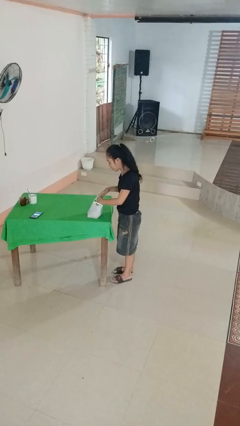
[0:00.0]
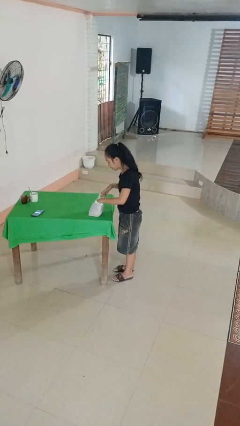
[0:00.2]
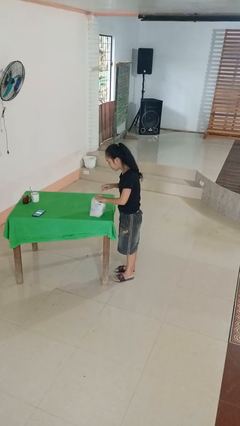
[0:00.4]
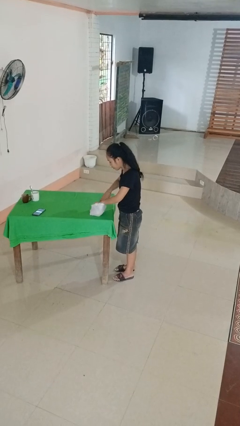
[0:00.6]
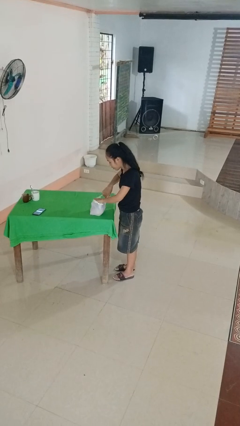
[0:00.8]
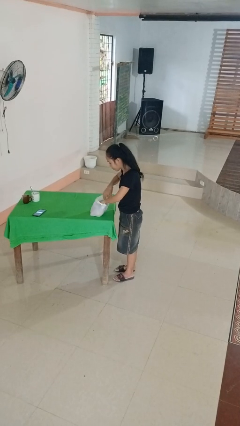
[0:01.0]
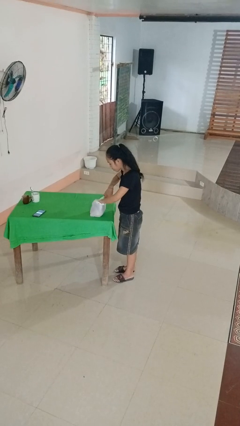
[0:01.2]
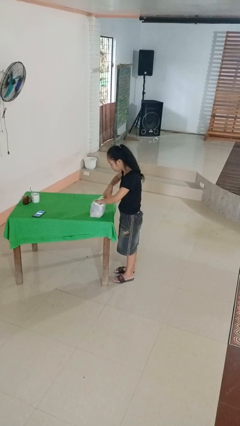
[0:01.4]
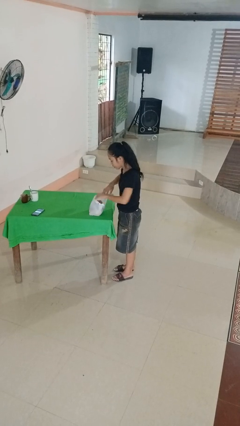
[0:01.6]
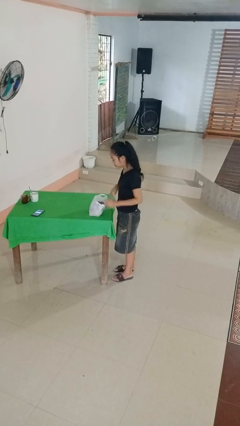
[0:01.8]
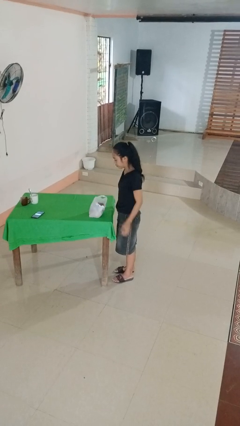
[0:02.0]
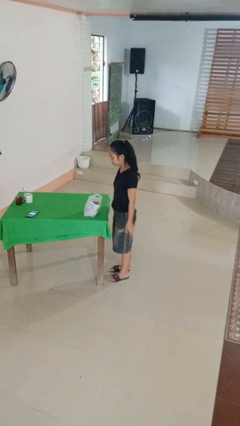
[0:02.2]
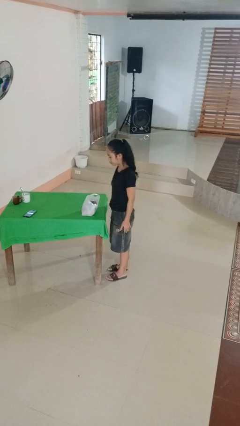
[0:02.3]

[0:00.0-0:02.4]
person searches in bag

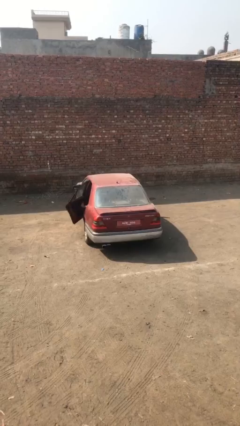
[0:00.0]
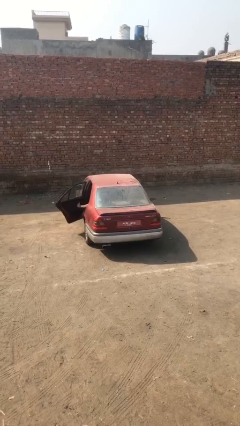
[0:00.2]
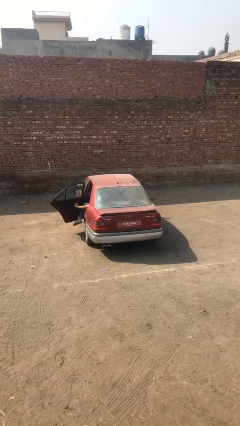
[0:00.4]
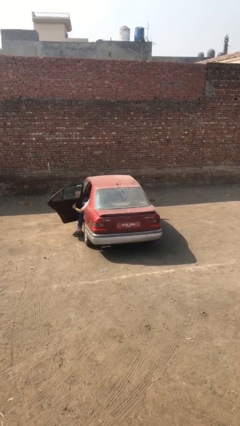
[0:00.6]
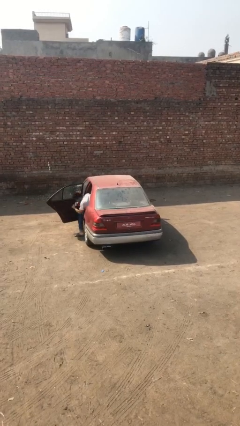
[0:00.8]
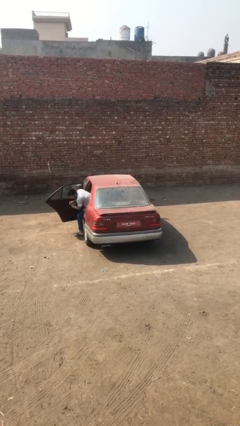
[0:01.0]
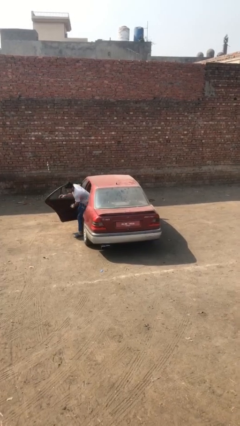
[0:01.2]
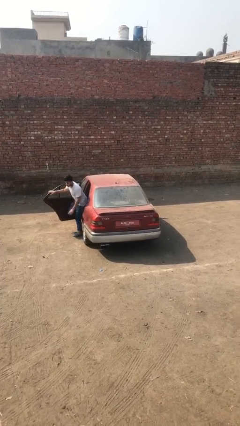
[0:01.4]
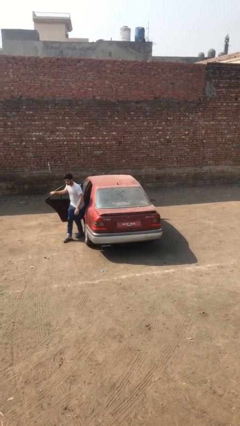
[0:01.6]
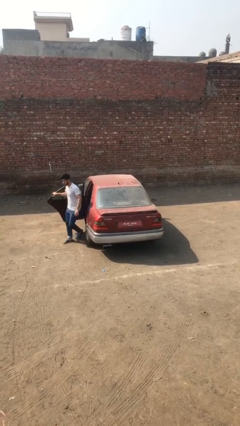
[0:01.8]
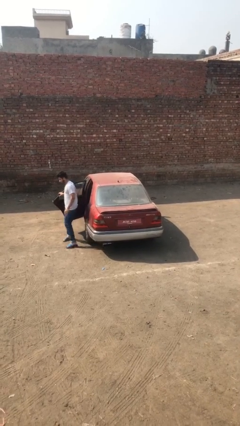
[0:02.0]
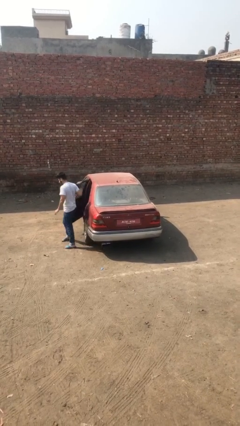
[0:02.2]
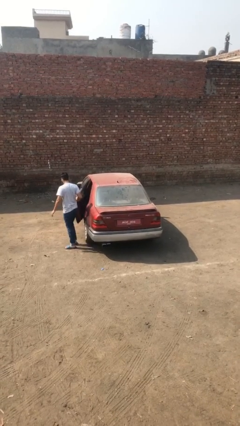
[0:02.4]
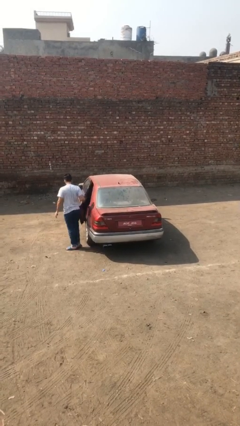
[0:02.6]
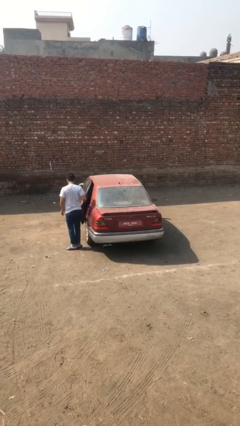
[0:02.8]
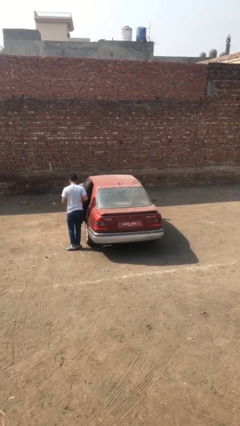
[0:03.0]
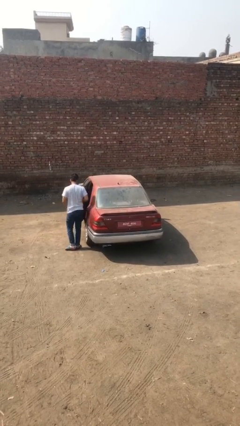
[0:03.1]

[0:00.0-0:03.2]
car drops off person

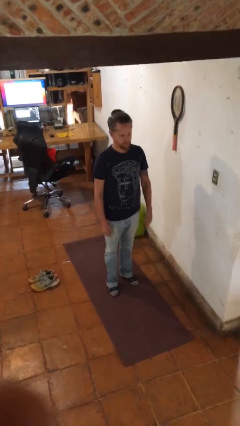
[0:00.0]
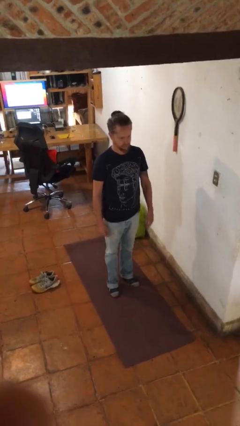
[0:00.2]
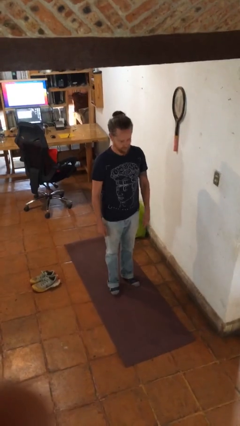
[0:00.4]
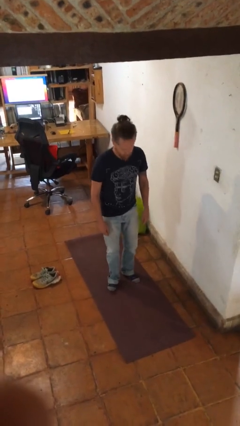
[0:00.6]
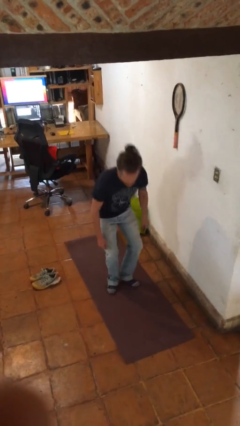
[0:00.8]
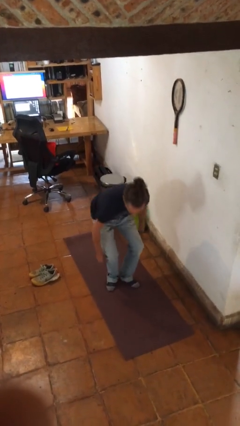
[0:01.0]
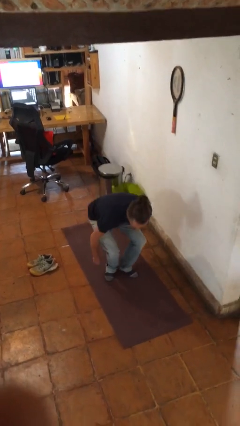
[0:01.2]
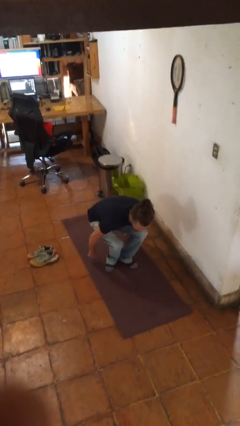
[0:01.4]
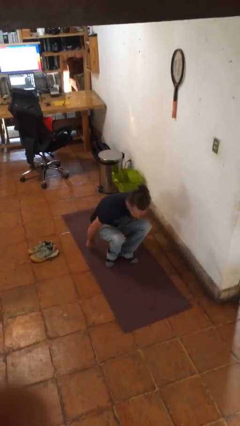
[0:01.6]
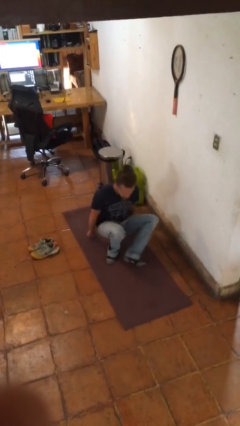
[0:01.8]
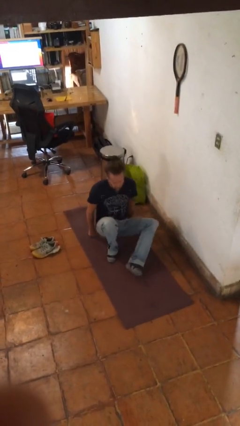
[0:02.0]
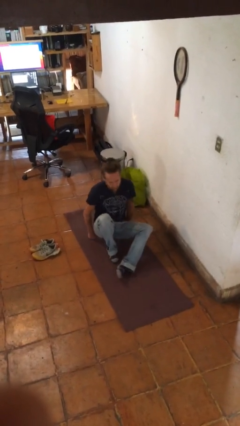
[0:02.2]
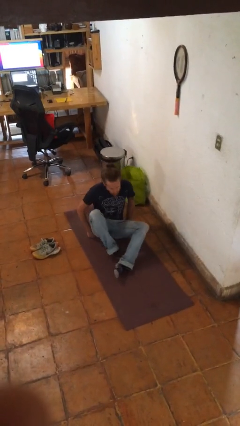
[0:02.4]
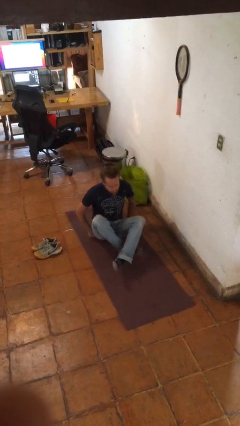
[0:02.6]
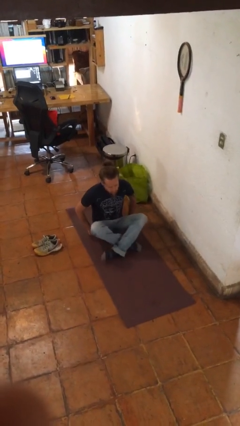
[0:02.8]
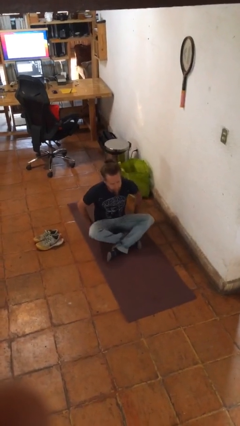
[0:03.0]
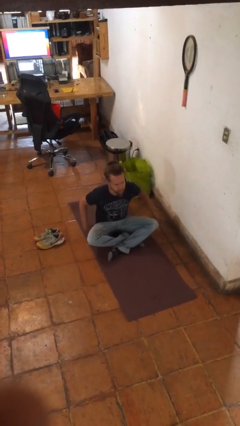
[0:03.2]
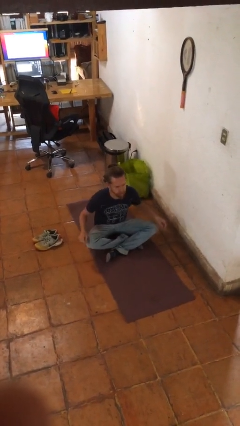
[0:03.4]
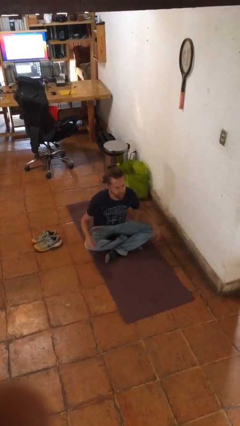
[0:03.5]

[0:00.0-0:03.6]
person sits crisscross

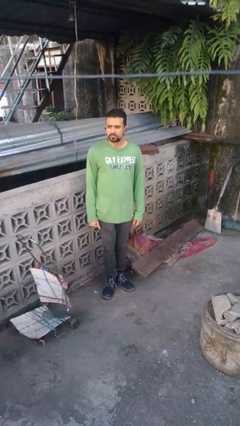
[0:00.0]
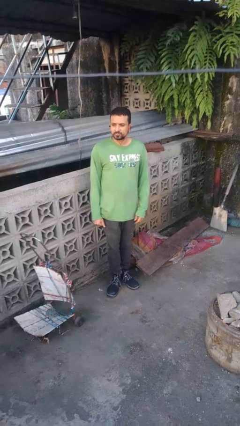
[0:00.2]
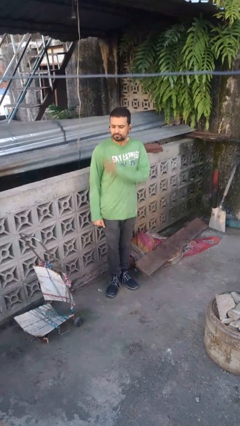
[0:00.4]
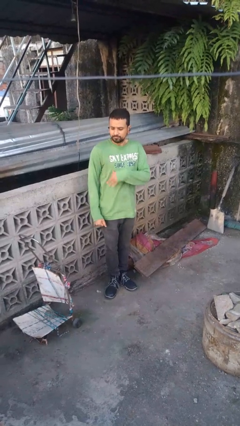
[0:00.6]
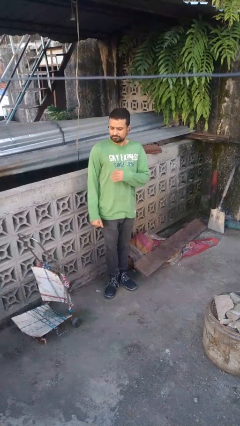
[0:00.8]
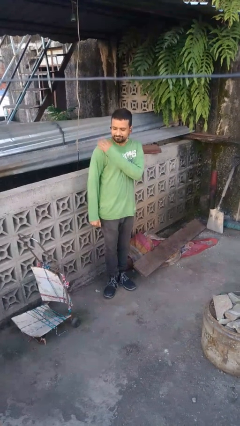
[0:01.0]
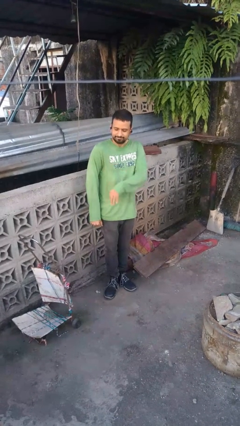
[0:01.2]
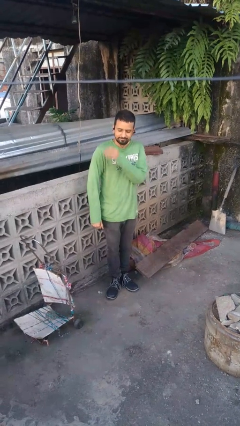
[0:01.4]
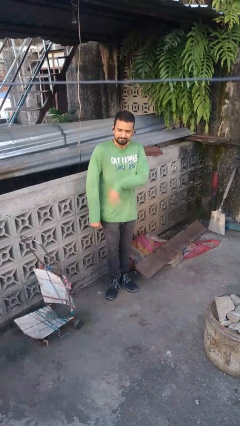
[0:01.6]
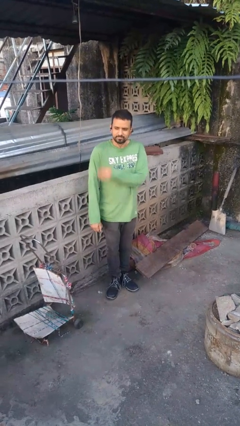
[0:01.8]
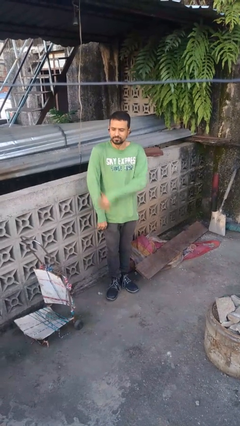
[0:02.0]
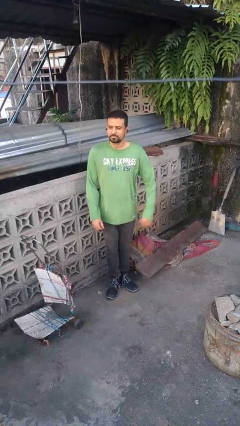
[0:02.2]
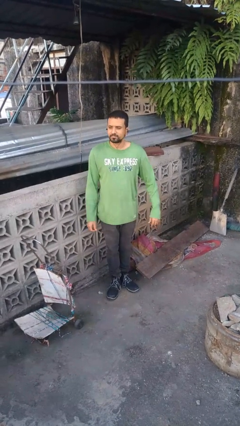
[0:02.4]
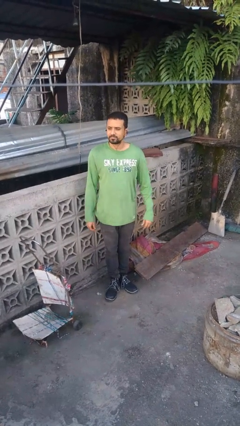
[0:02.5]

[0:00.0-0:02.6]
person swats bug

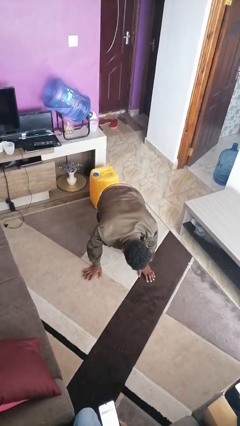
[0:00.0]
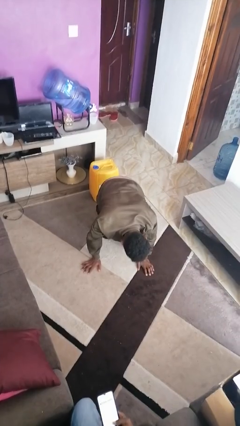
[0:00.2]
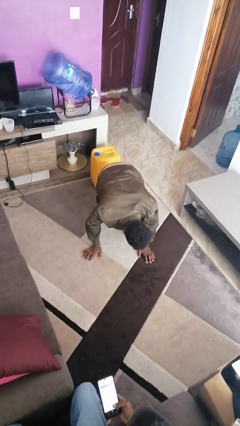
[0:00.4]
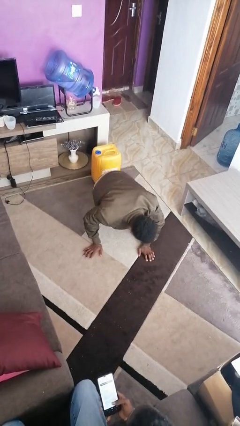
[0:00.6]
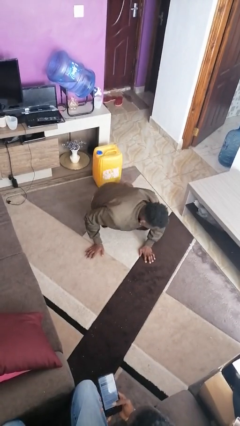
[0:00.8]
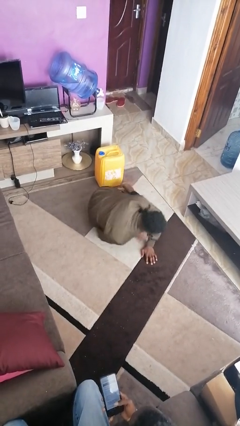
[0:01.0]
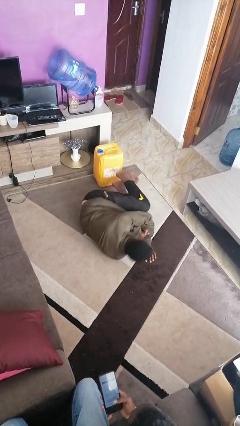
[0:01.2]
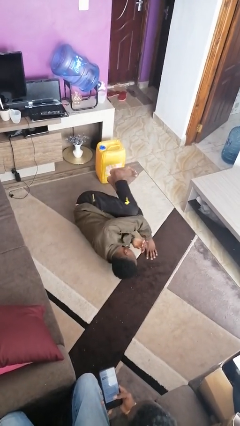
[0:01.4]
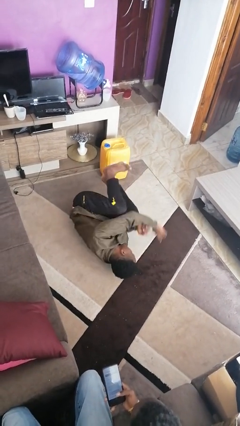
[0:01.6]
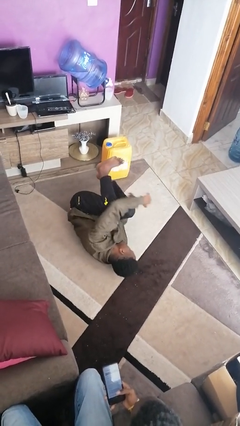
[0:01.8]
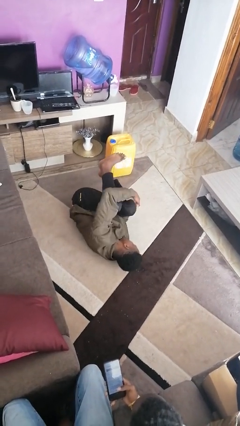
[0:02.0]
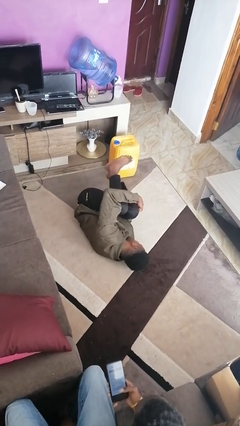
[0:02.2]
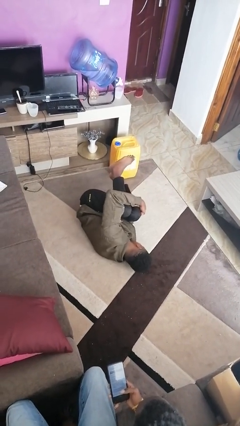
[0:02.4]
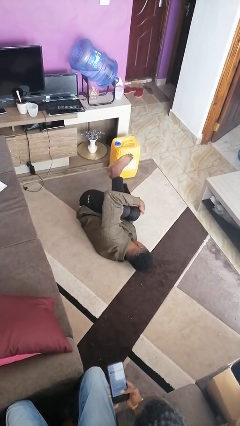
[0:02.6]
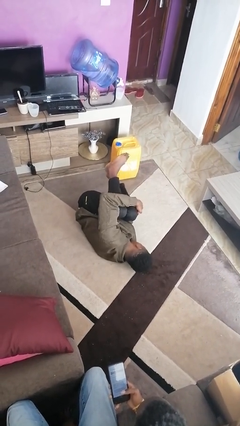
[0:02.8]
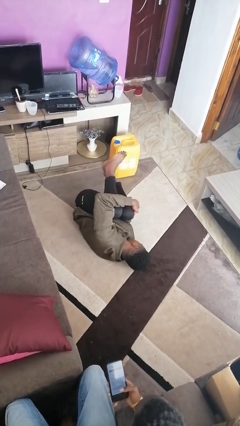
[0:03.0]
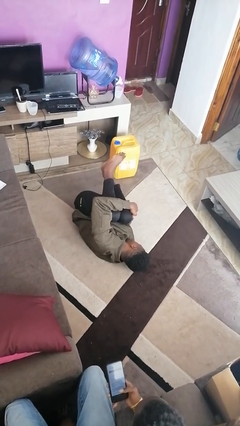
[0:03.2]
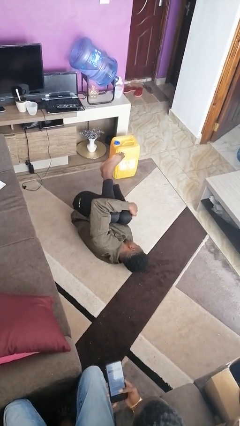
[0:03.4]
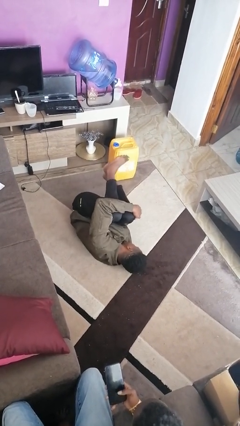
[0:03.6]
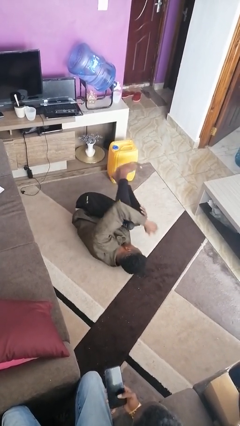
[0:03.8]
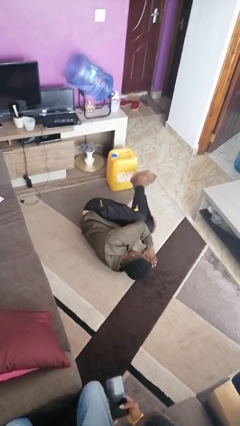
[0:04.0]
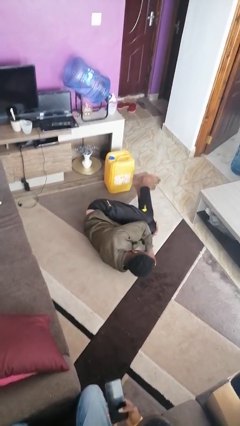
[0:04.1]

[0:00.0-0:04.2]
person lies down on floor

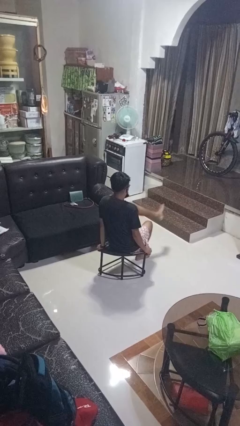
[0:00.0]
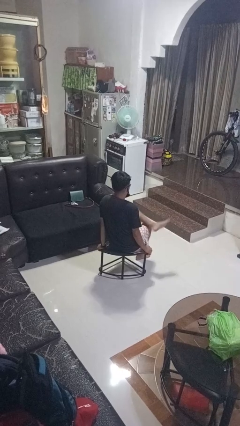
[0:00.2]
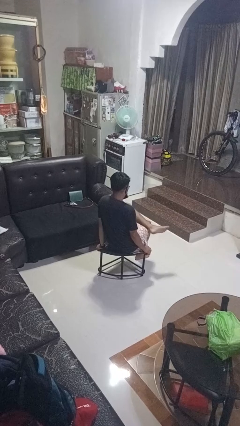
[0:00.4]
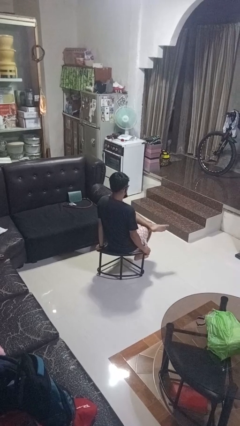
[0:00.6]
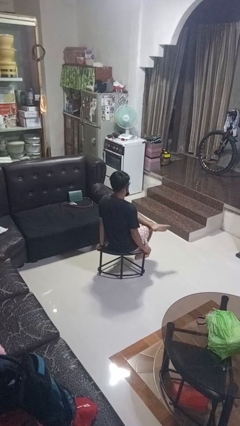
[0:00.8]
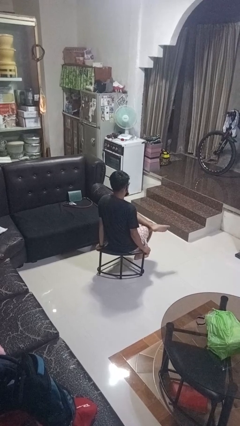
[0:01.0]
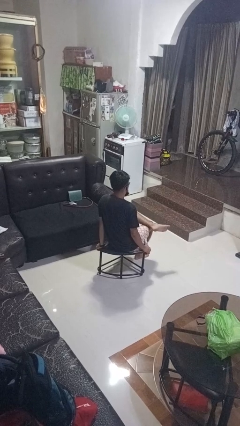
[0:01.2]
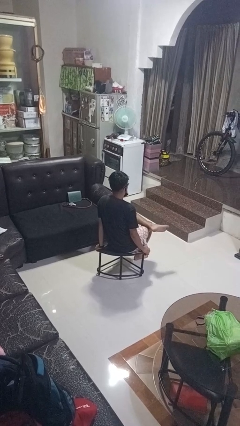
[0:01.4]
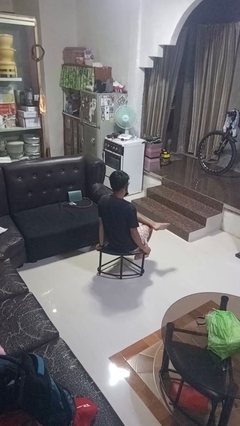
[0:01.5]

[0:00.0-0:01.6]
person crosses legs
